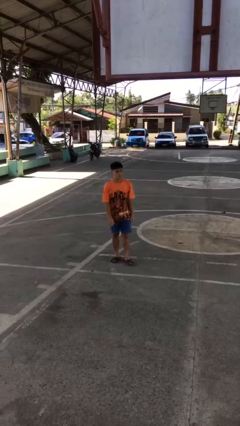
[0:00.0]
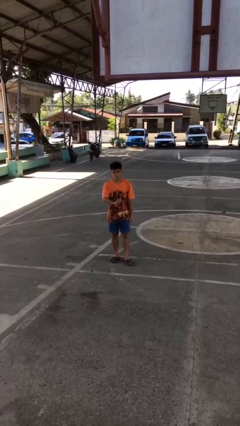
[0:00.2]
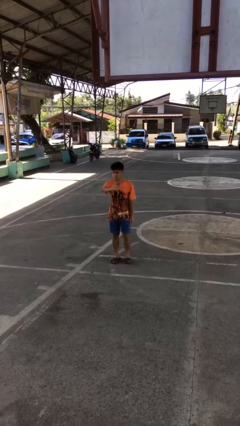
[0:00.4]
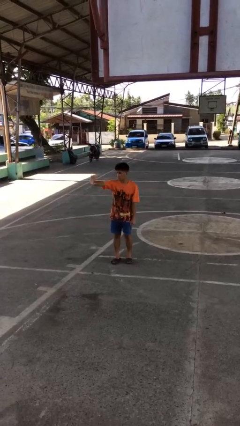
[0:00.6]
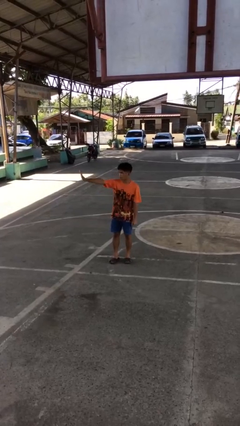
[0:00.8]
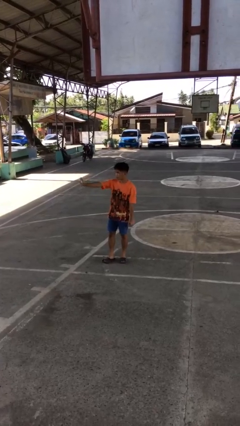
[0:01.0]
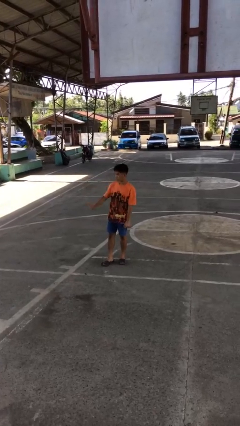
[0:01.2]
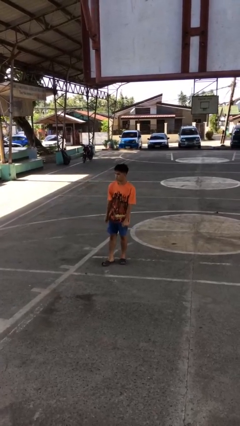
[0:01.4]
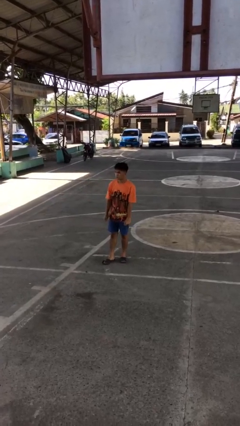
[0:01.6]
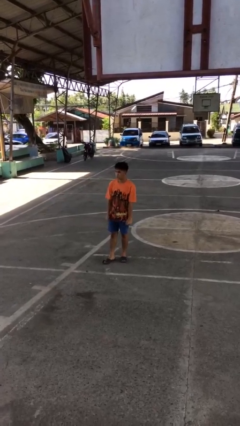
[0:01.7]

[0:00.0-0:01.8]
person gestures swipe right

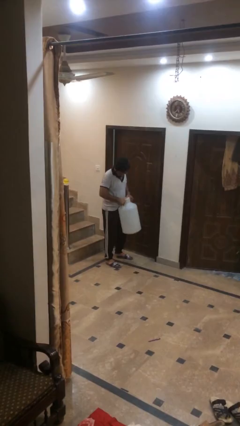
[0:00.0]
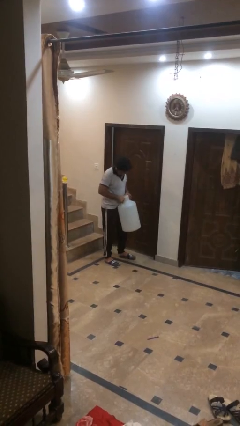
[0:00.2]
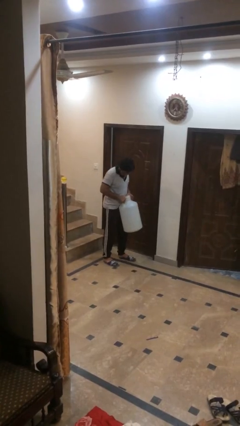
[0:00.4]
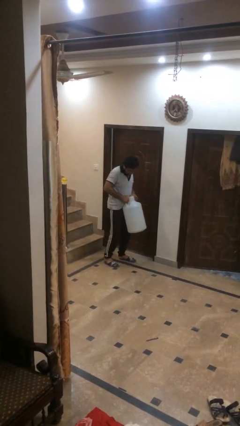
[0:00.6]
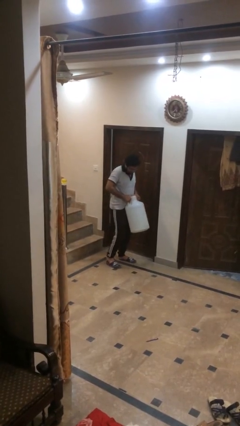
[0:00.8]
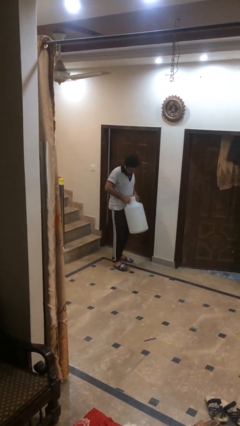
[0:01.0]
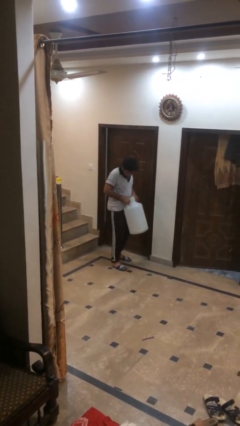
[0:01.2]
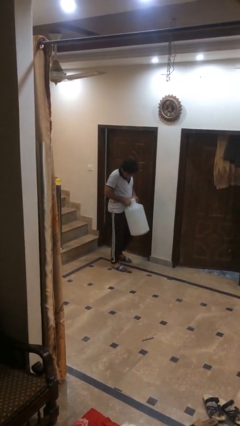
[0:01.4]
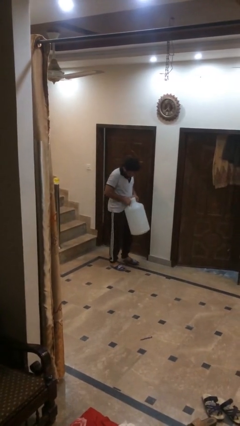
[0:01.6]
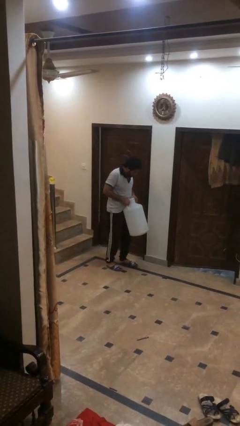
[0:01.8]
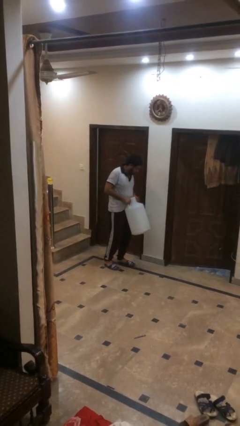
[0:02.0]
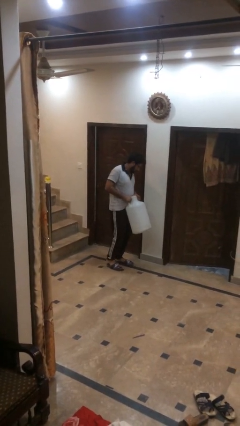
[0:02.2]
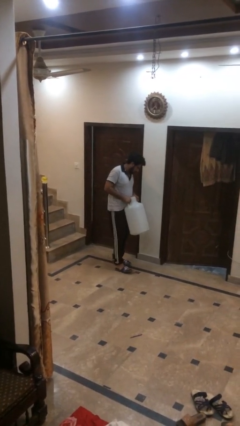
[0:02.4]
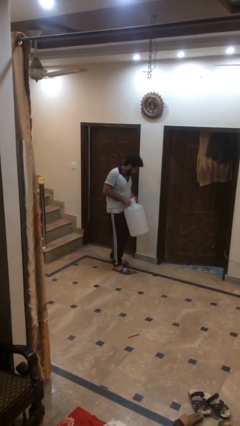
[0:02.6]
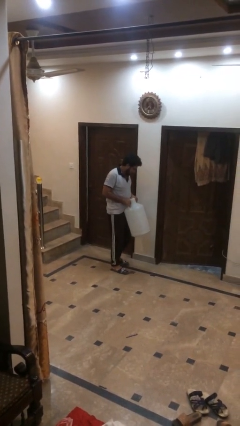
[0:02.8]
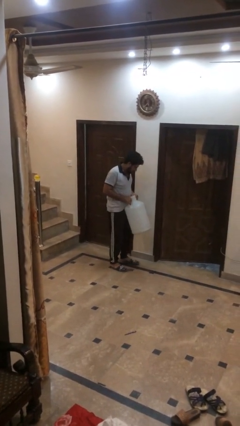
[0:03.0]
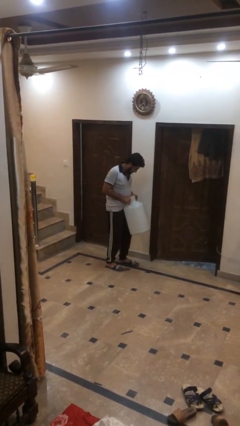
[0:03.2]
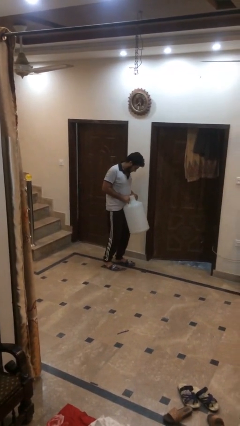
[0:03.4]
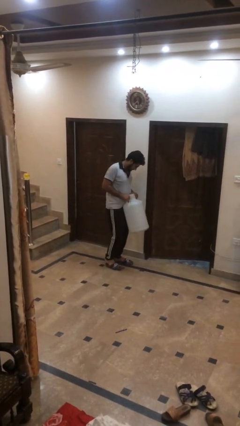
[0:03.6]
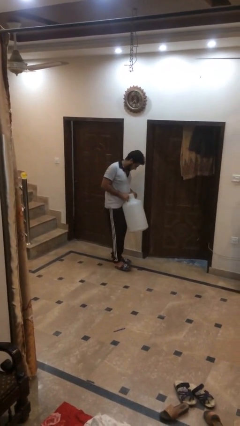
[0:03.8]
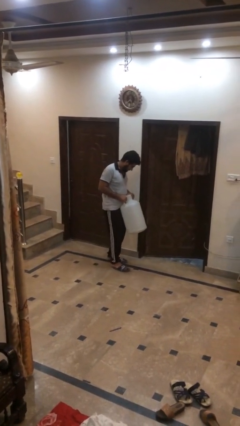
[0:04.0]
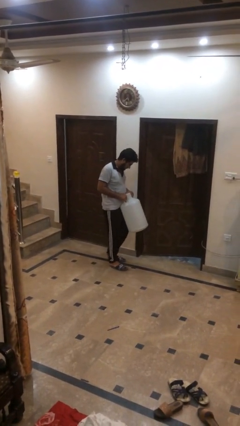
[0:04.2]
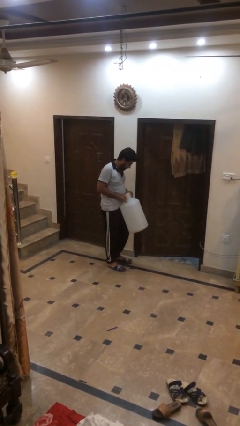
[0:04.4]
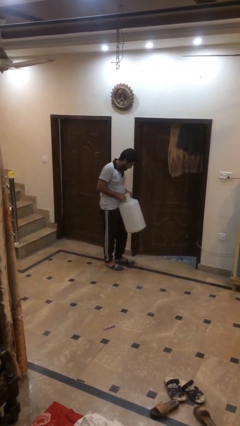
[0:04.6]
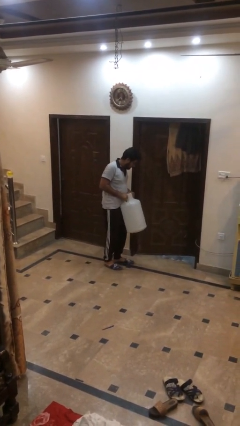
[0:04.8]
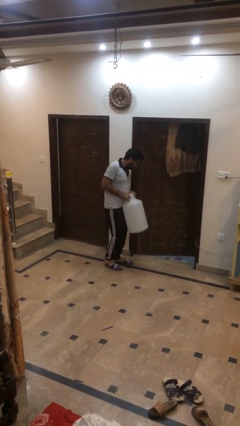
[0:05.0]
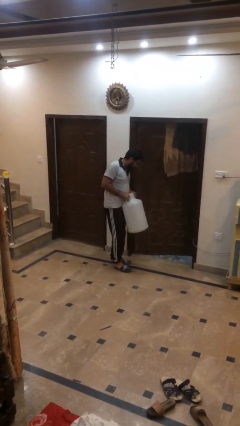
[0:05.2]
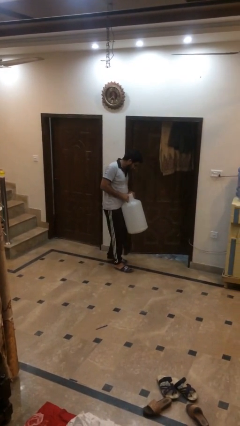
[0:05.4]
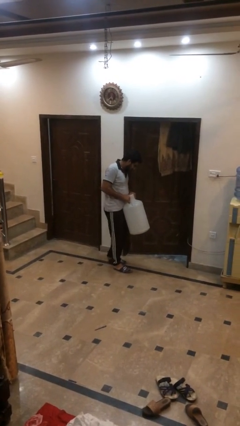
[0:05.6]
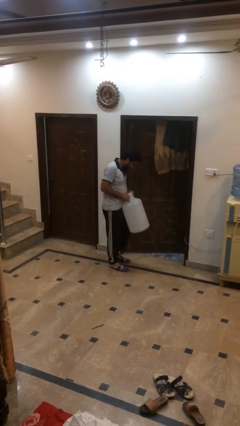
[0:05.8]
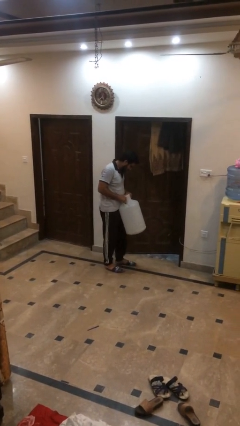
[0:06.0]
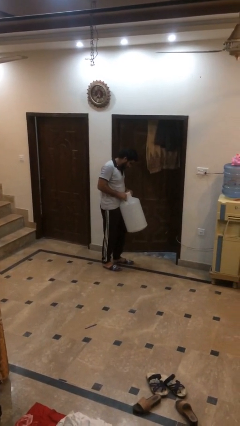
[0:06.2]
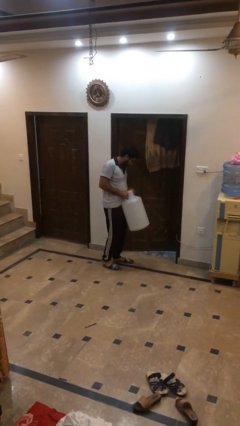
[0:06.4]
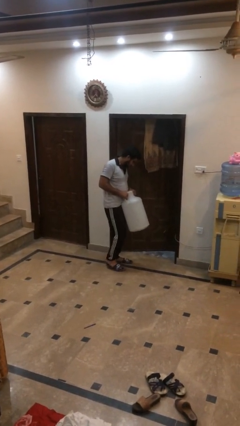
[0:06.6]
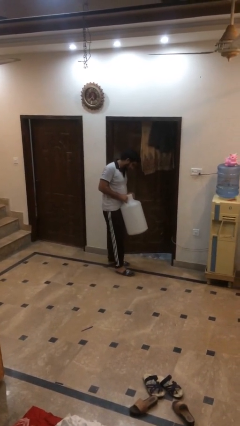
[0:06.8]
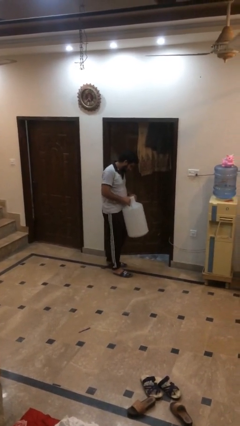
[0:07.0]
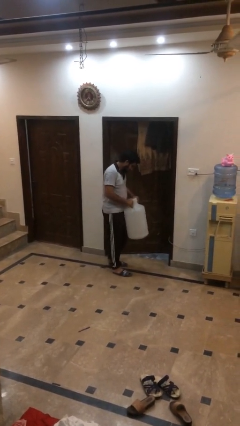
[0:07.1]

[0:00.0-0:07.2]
person carries heavy object

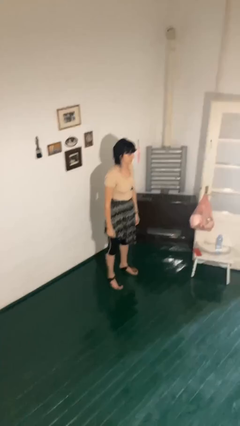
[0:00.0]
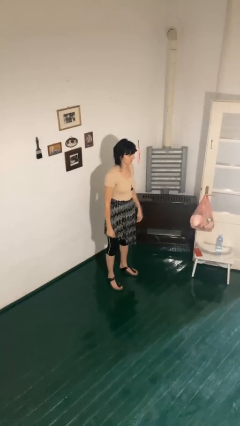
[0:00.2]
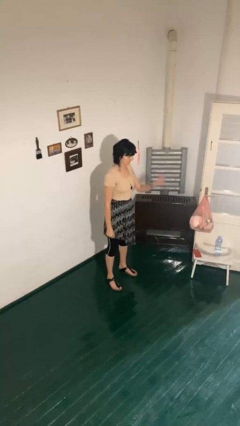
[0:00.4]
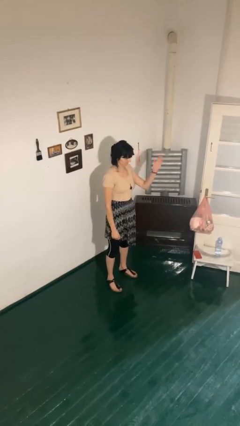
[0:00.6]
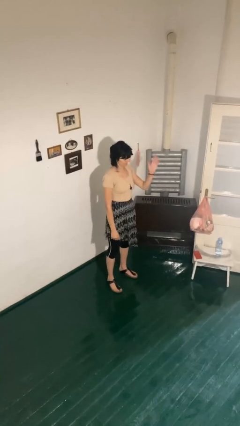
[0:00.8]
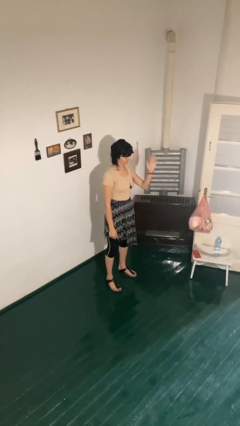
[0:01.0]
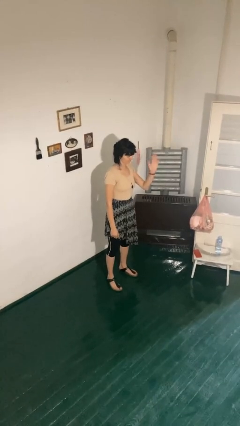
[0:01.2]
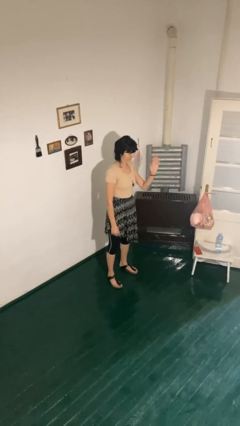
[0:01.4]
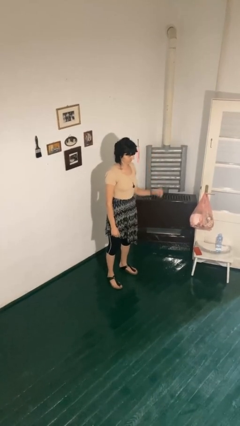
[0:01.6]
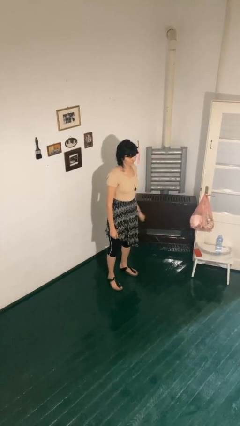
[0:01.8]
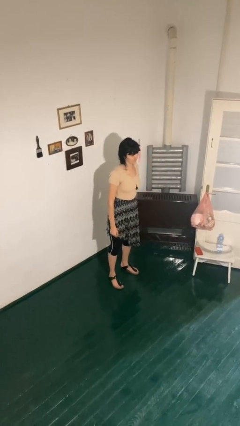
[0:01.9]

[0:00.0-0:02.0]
person waves at person

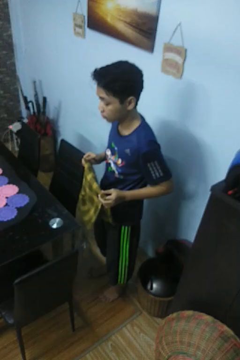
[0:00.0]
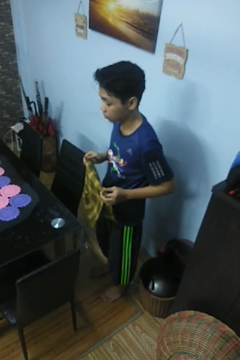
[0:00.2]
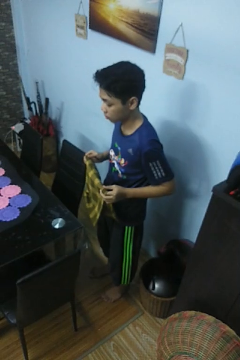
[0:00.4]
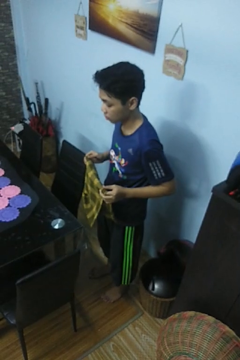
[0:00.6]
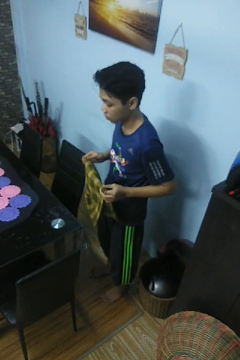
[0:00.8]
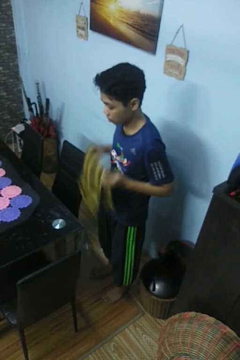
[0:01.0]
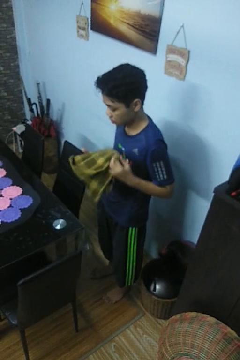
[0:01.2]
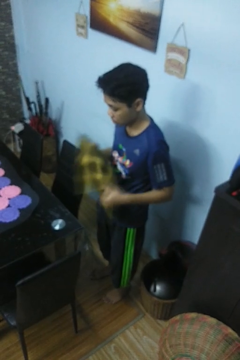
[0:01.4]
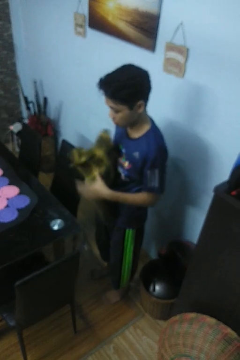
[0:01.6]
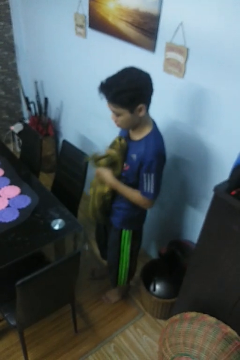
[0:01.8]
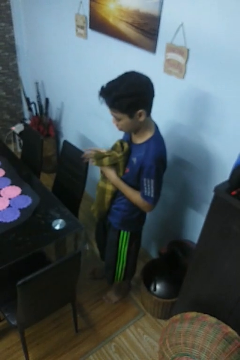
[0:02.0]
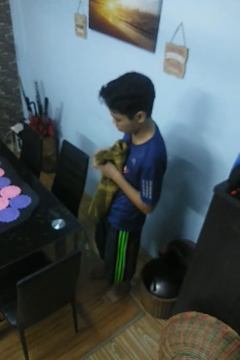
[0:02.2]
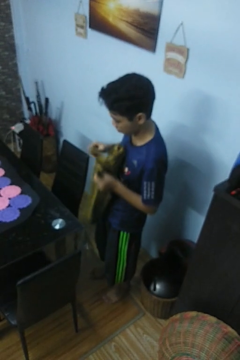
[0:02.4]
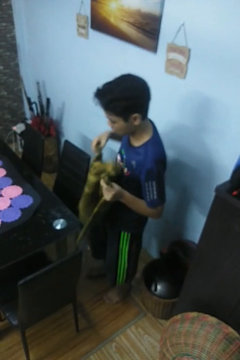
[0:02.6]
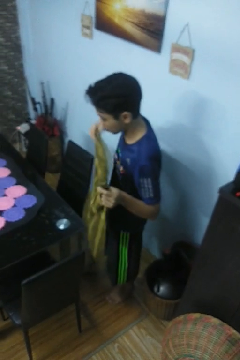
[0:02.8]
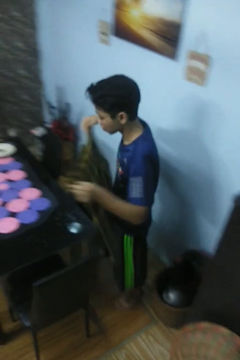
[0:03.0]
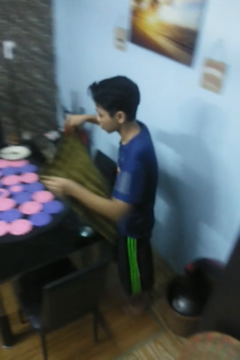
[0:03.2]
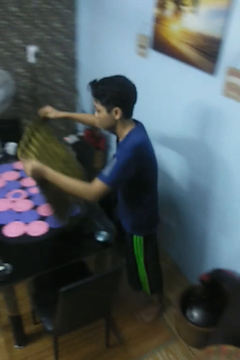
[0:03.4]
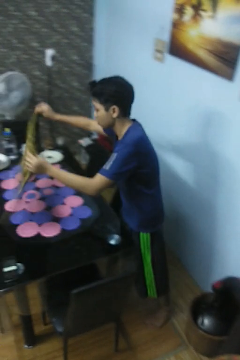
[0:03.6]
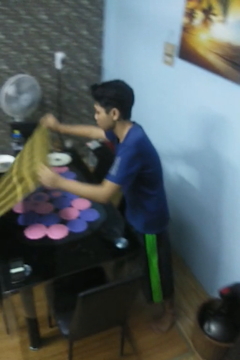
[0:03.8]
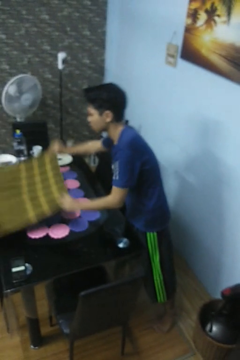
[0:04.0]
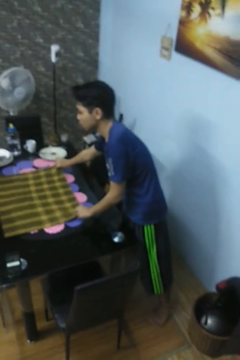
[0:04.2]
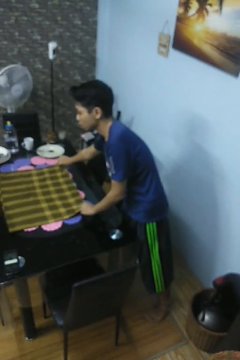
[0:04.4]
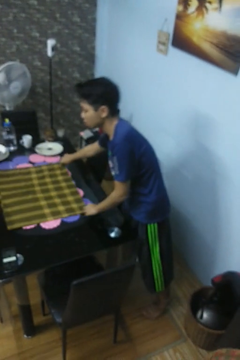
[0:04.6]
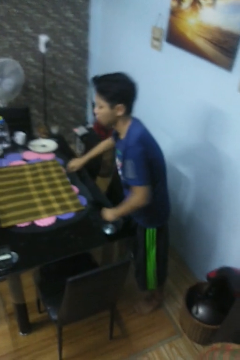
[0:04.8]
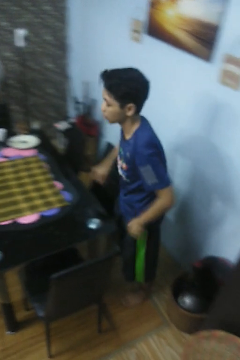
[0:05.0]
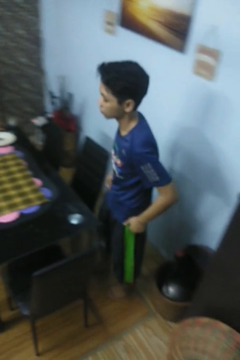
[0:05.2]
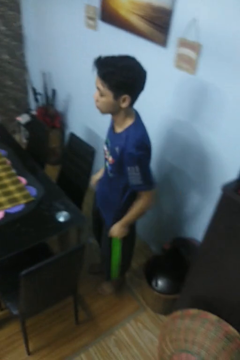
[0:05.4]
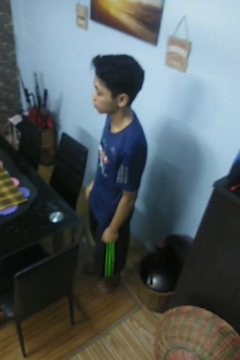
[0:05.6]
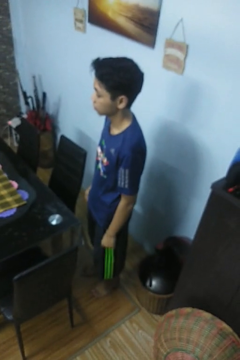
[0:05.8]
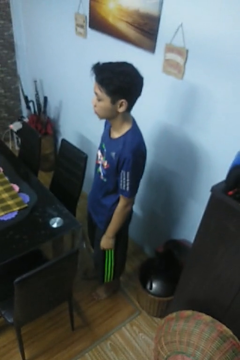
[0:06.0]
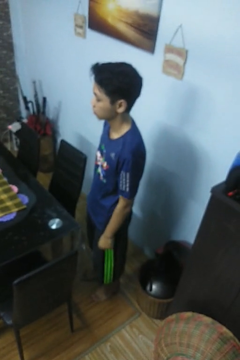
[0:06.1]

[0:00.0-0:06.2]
person spreads tablecloth

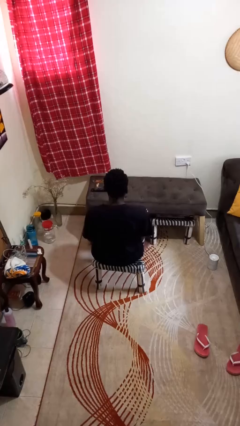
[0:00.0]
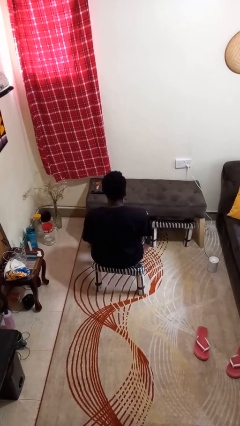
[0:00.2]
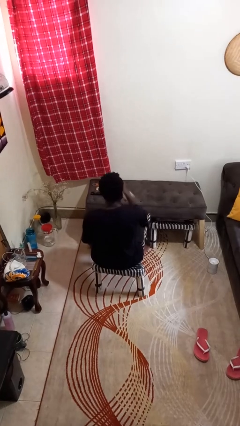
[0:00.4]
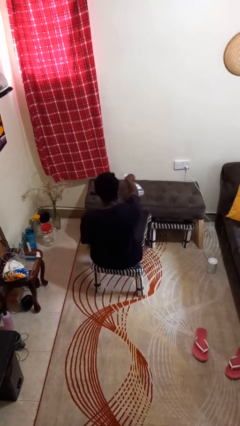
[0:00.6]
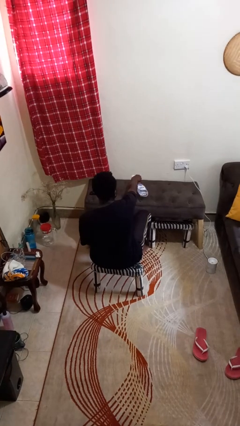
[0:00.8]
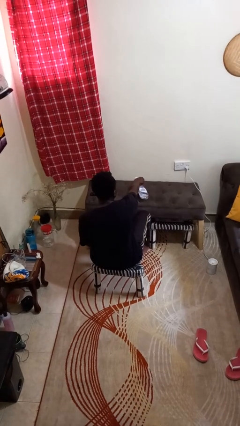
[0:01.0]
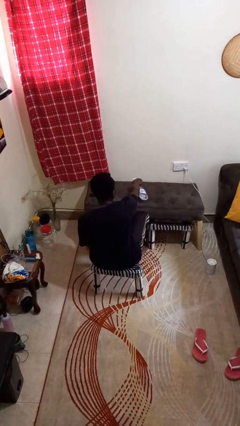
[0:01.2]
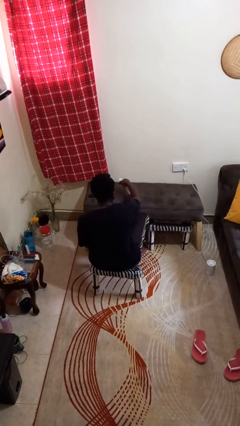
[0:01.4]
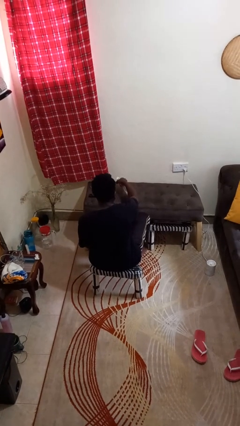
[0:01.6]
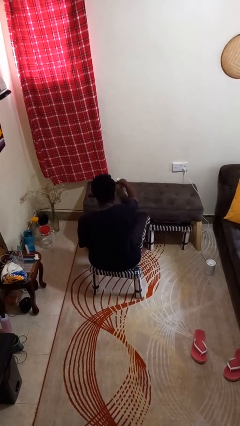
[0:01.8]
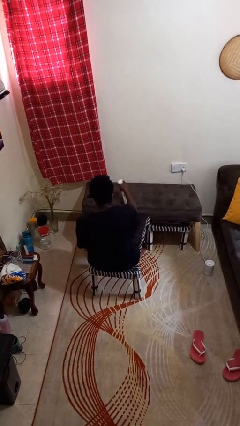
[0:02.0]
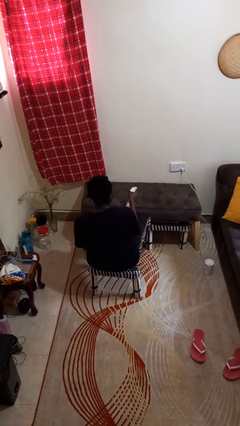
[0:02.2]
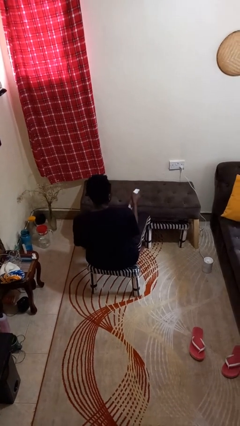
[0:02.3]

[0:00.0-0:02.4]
person sprays from bottle
